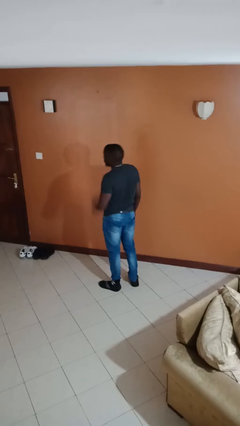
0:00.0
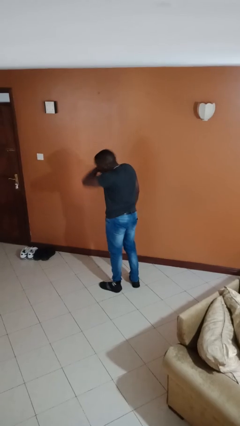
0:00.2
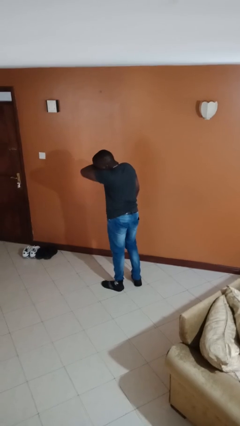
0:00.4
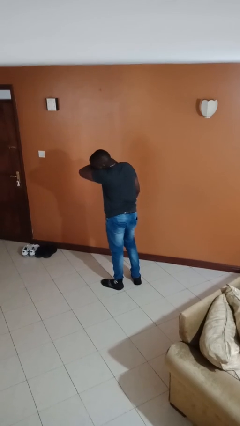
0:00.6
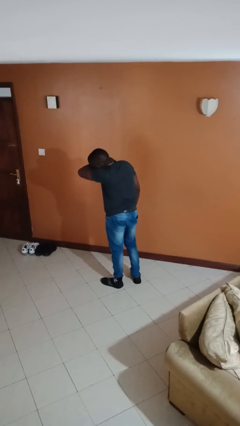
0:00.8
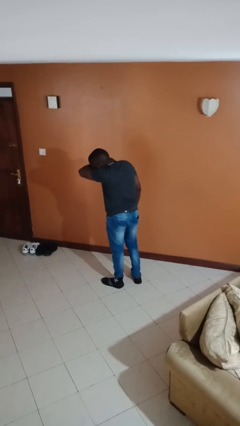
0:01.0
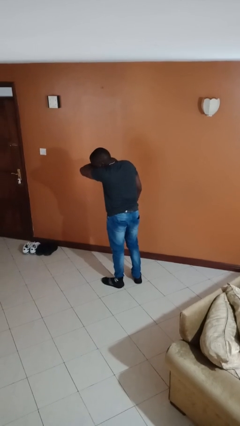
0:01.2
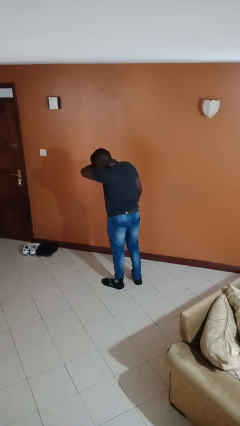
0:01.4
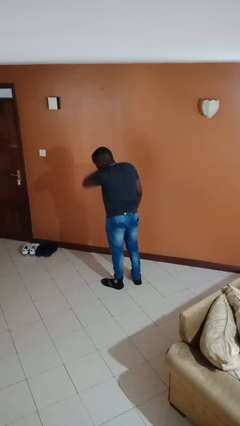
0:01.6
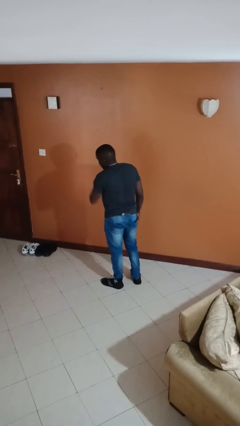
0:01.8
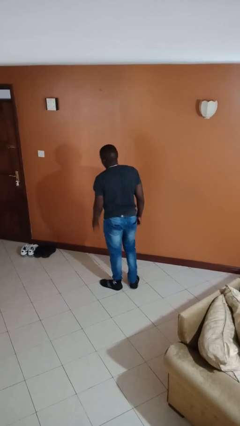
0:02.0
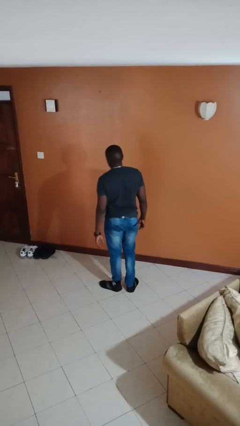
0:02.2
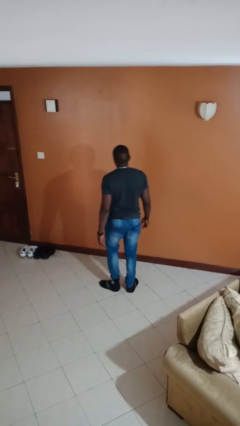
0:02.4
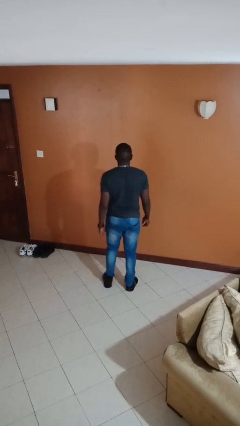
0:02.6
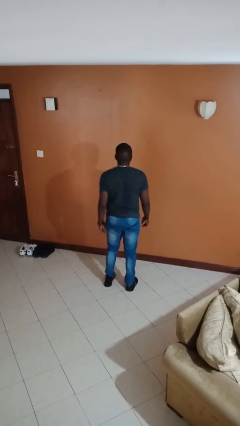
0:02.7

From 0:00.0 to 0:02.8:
person sneezes into arm

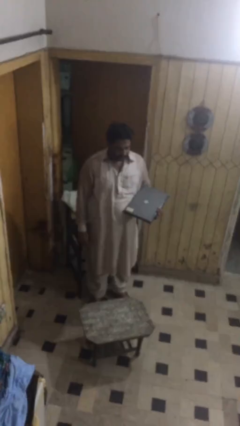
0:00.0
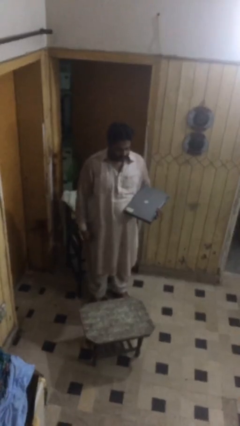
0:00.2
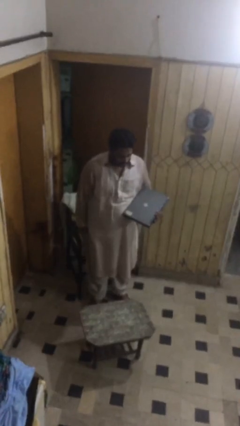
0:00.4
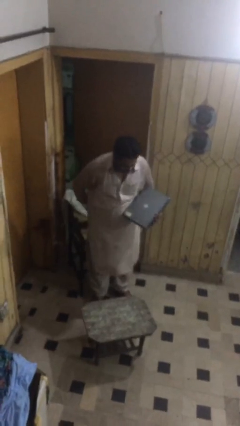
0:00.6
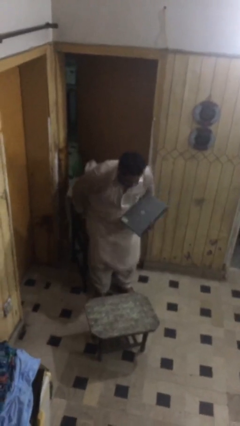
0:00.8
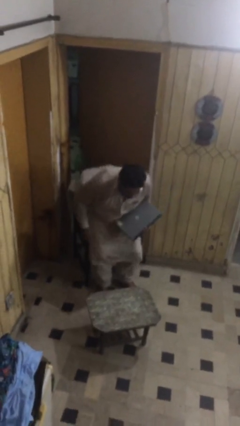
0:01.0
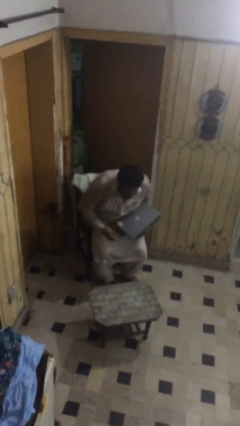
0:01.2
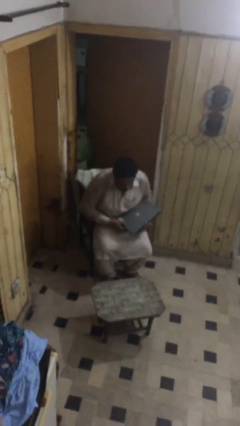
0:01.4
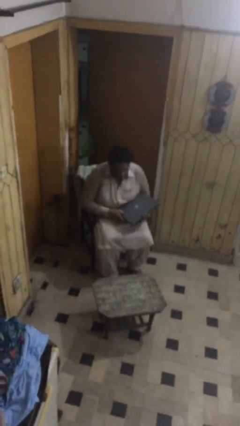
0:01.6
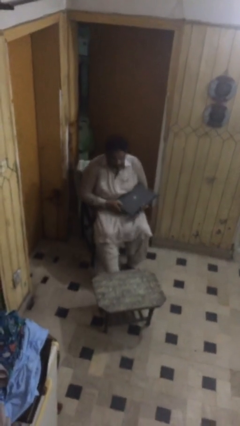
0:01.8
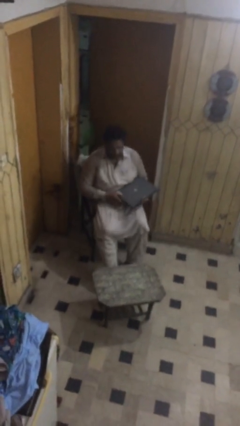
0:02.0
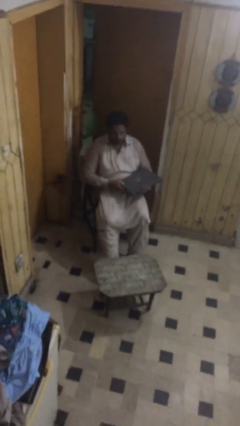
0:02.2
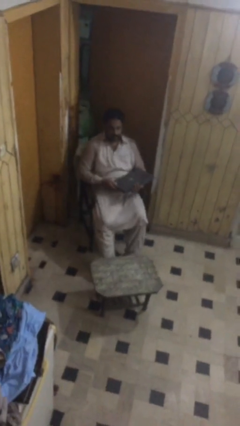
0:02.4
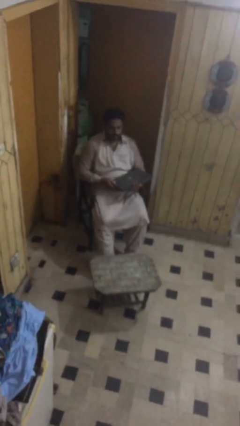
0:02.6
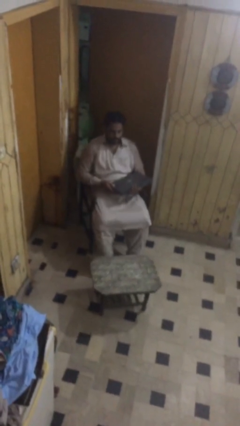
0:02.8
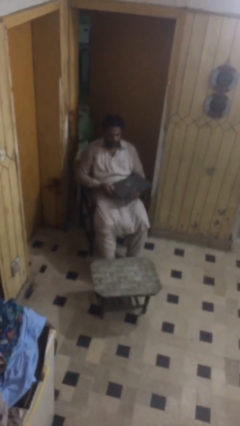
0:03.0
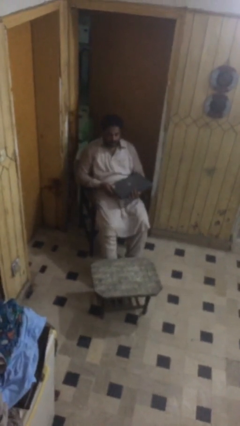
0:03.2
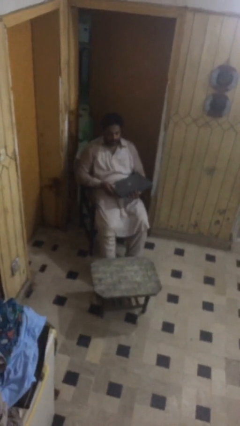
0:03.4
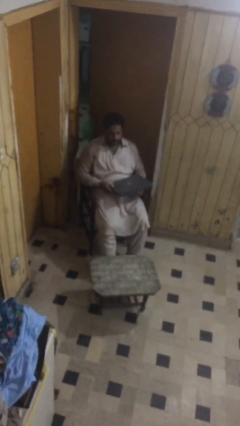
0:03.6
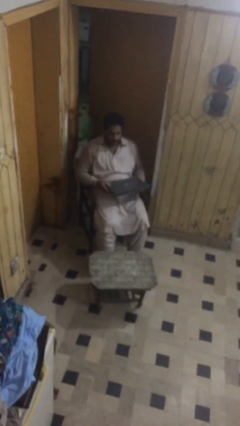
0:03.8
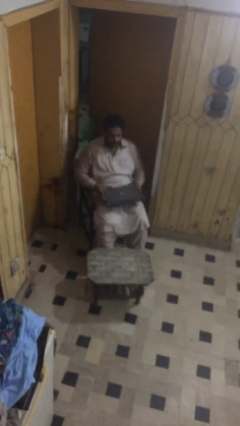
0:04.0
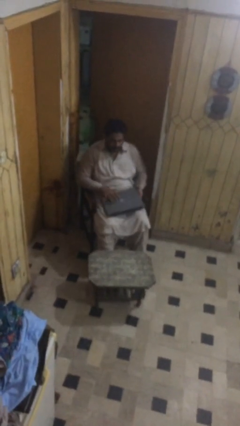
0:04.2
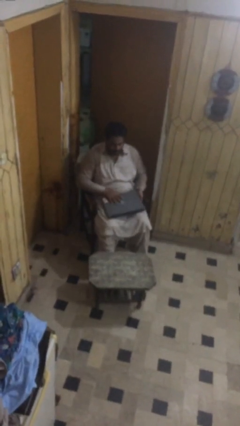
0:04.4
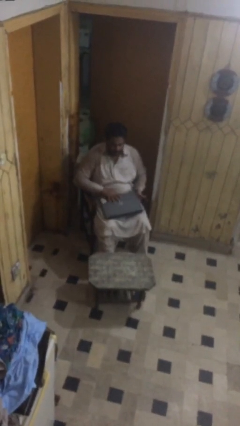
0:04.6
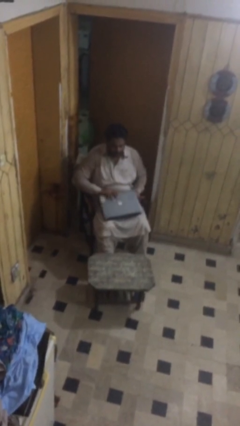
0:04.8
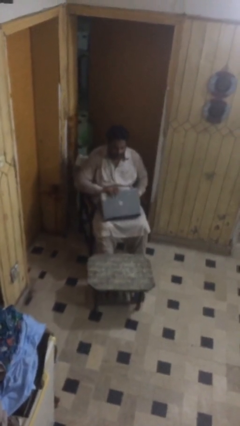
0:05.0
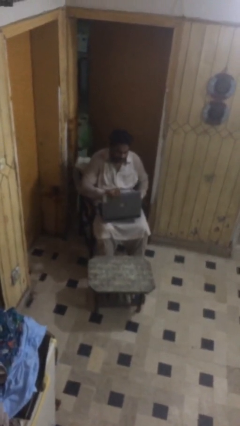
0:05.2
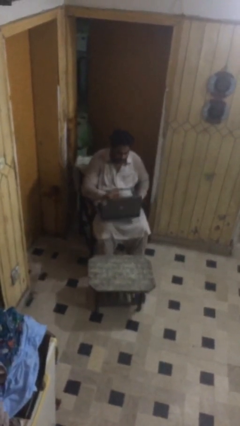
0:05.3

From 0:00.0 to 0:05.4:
person sits down

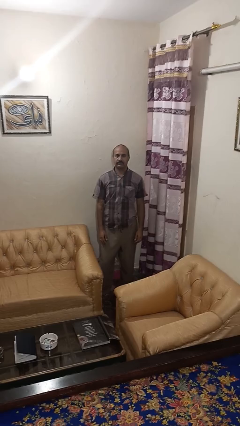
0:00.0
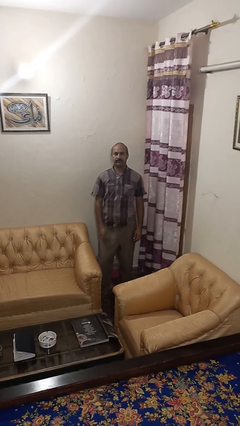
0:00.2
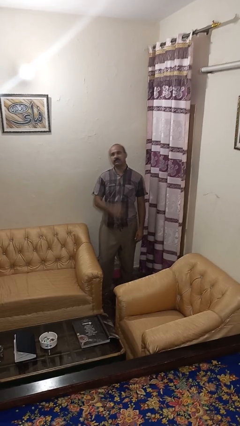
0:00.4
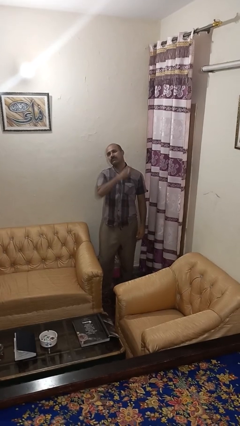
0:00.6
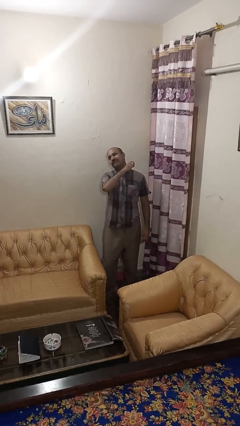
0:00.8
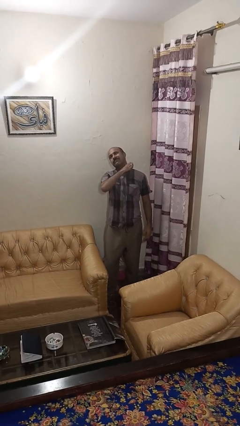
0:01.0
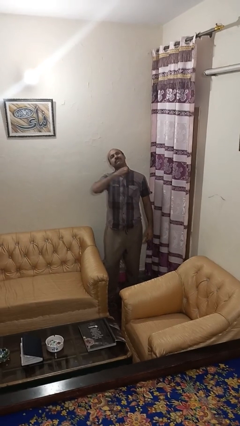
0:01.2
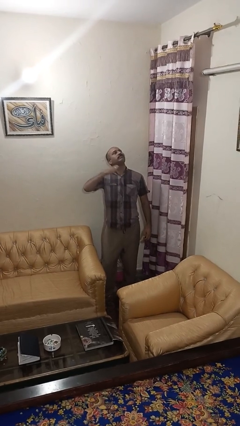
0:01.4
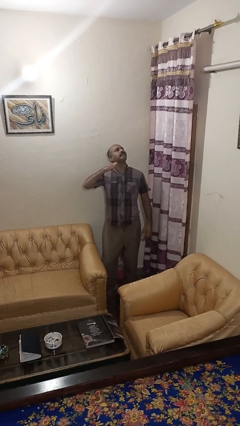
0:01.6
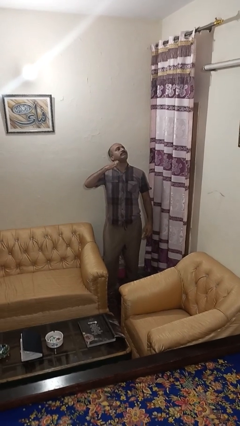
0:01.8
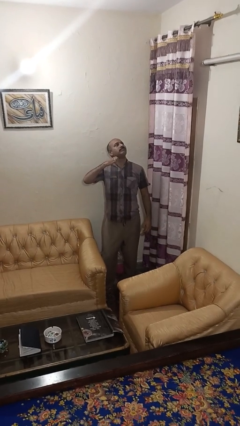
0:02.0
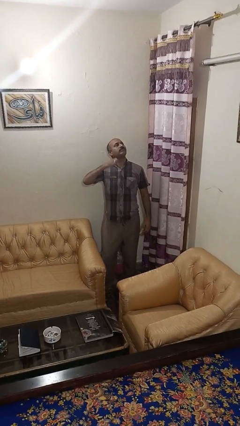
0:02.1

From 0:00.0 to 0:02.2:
person gestures cut

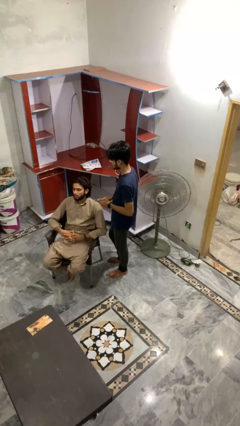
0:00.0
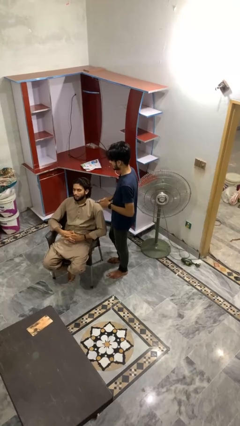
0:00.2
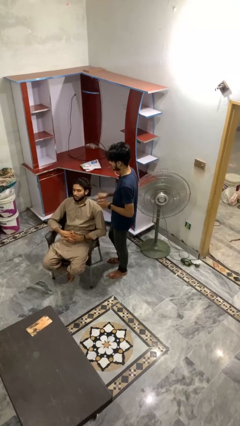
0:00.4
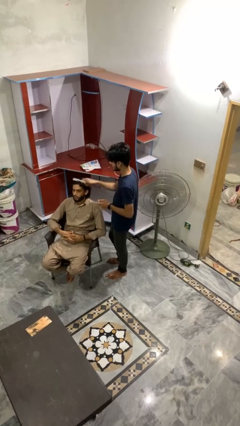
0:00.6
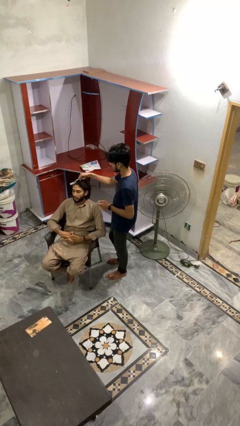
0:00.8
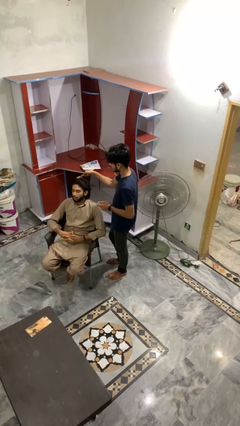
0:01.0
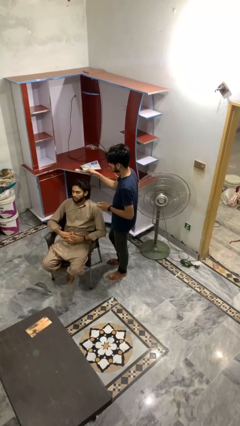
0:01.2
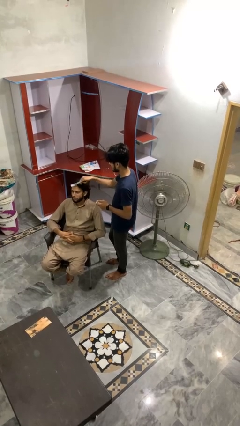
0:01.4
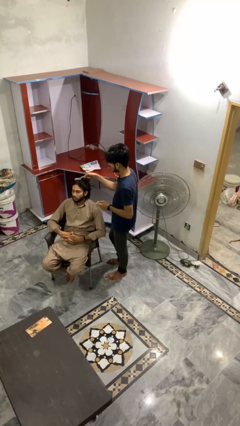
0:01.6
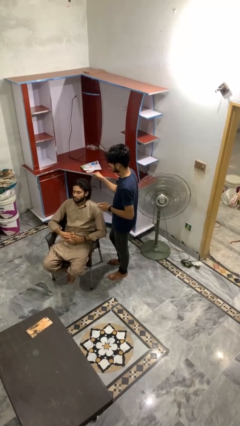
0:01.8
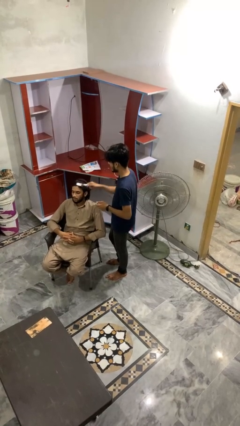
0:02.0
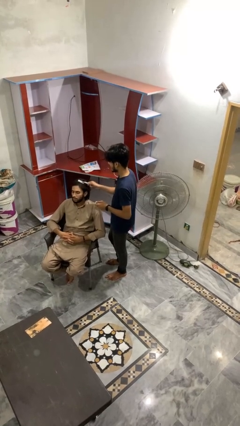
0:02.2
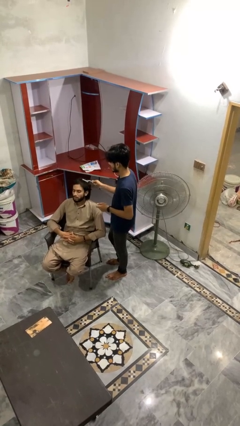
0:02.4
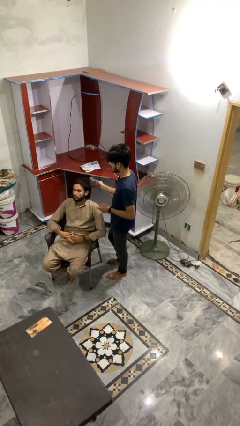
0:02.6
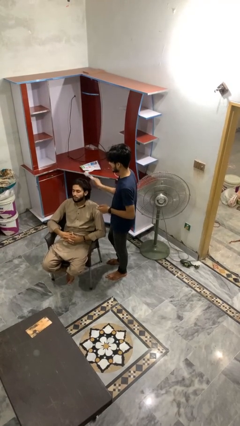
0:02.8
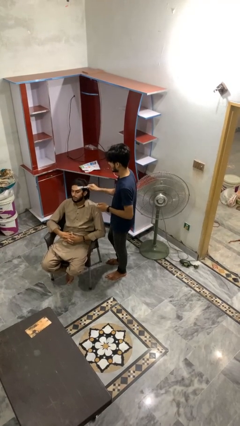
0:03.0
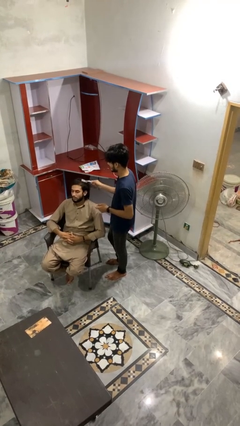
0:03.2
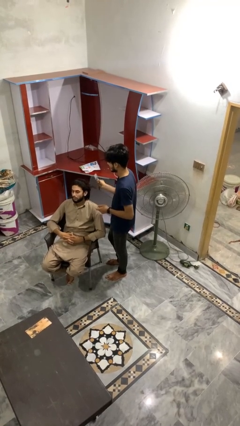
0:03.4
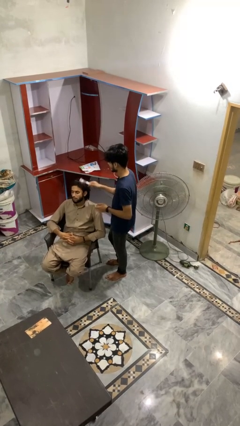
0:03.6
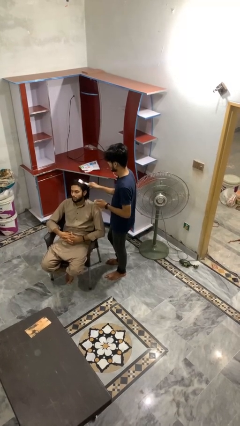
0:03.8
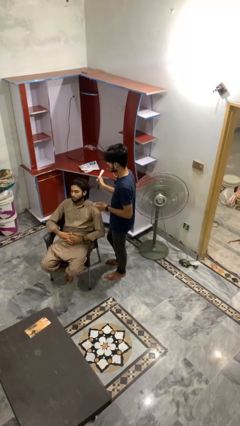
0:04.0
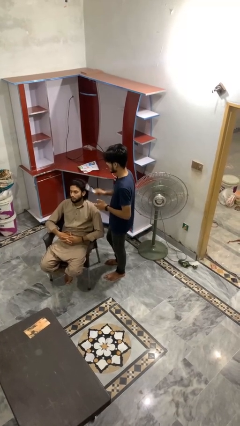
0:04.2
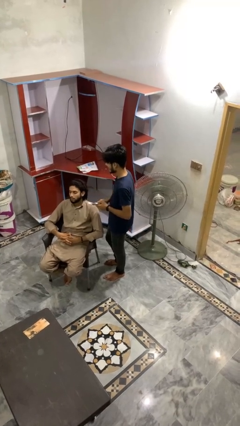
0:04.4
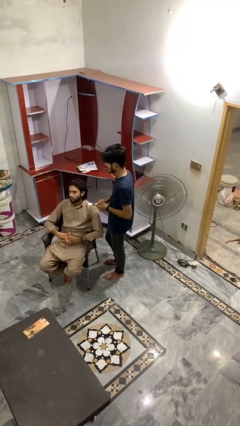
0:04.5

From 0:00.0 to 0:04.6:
person brushes hair of person

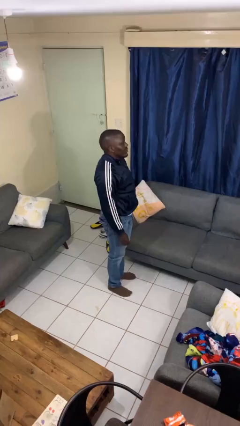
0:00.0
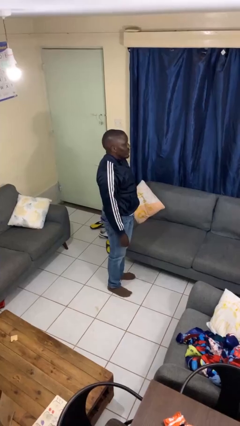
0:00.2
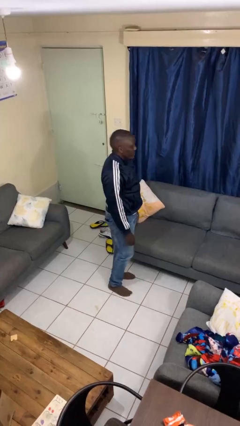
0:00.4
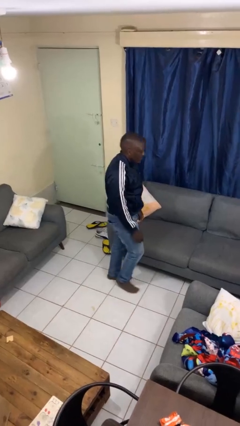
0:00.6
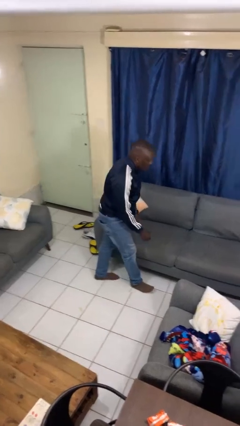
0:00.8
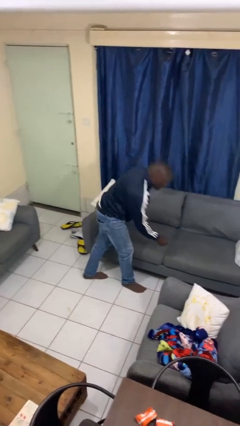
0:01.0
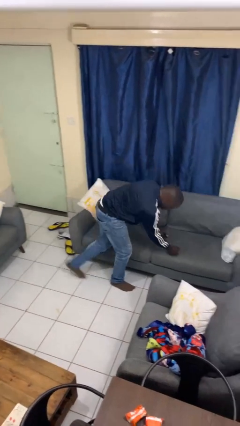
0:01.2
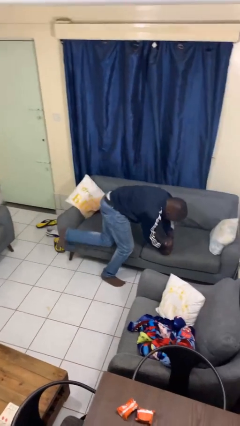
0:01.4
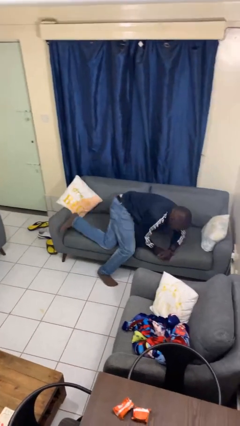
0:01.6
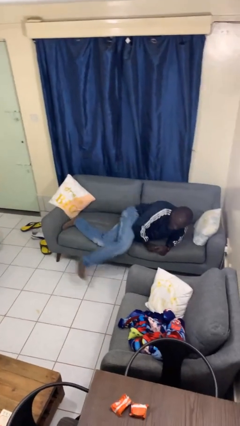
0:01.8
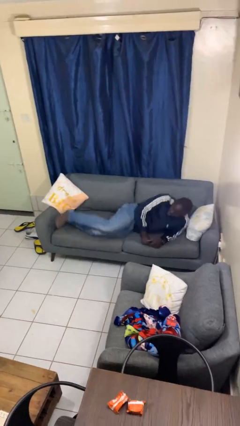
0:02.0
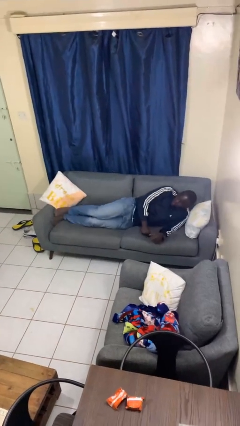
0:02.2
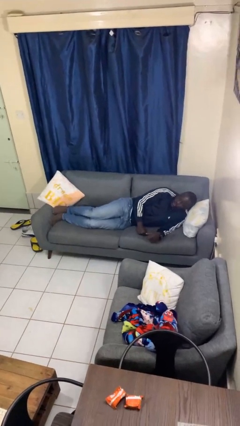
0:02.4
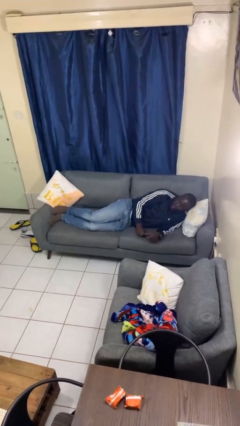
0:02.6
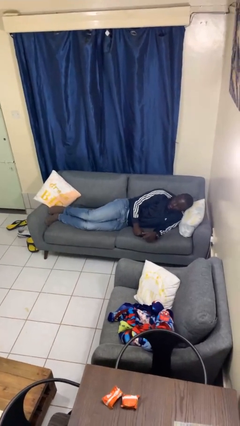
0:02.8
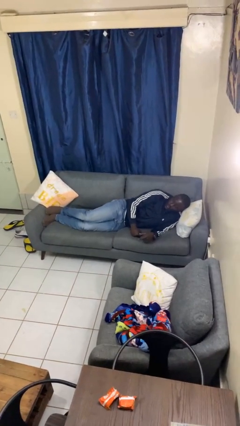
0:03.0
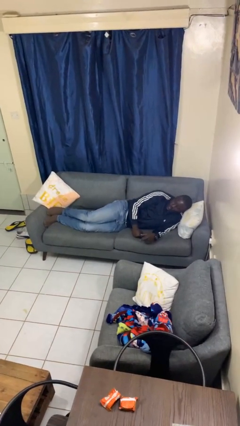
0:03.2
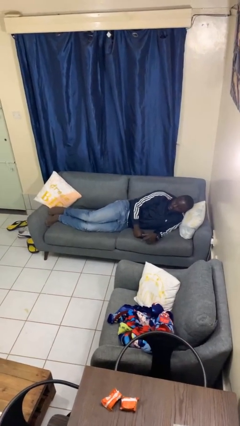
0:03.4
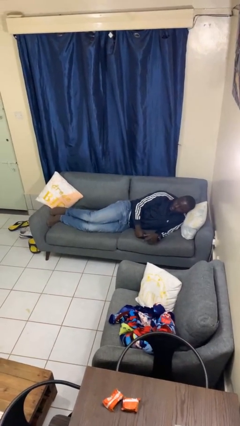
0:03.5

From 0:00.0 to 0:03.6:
person lies down on couch
